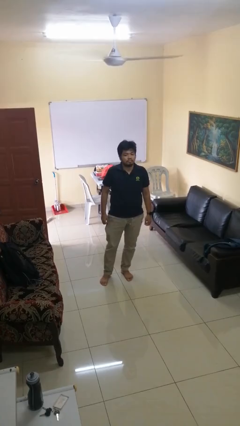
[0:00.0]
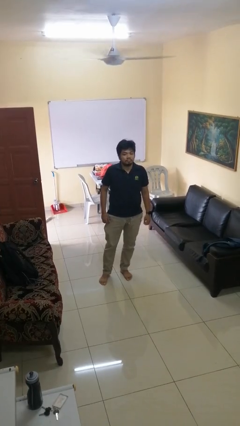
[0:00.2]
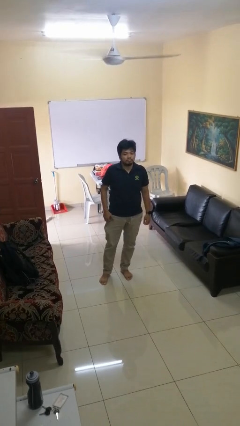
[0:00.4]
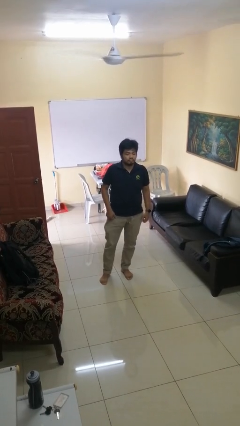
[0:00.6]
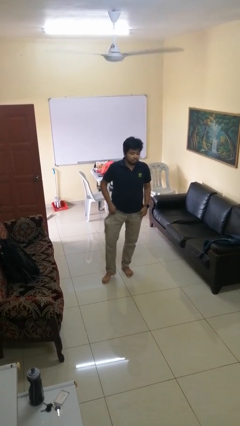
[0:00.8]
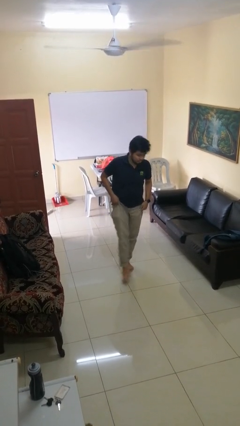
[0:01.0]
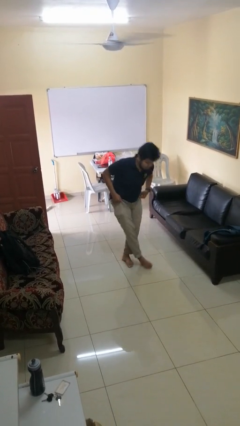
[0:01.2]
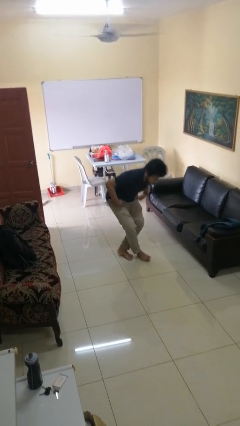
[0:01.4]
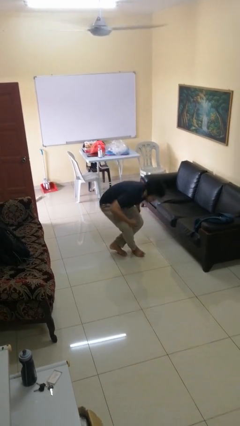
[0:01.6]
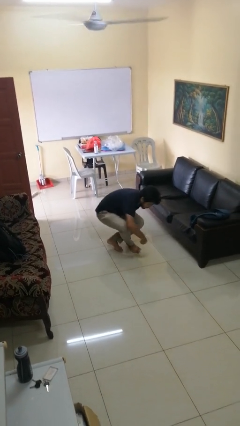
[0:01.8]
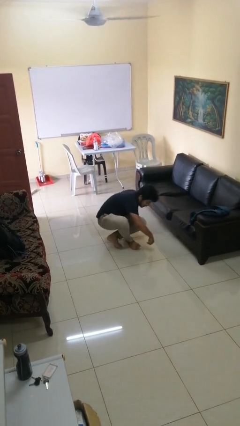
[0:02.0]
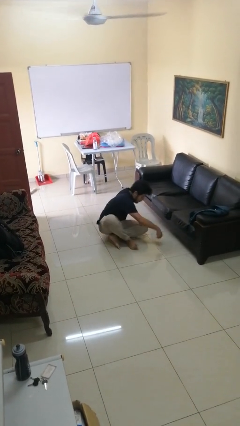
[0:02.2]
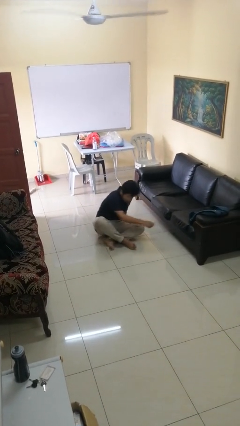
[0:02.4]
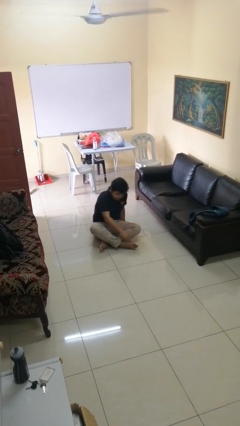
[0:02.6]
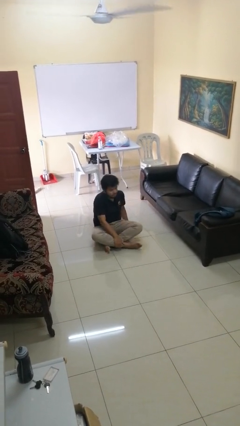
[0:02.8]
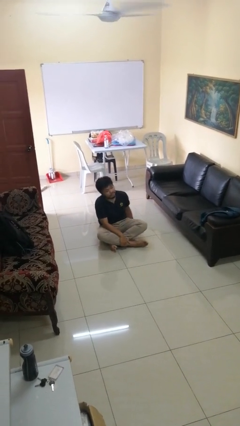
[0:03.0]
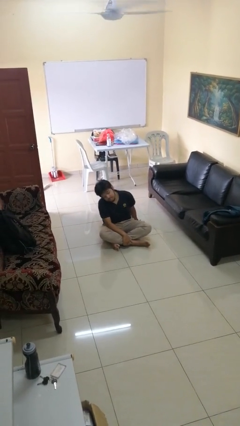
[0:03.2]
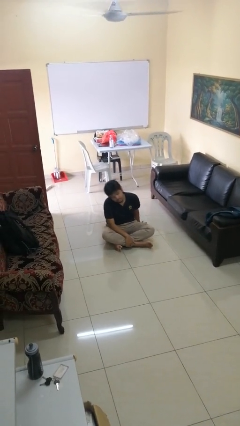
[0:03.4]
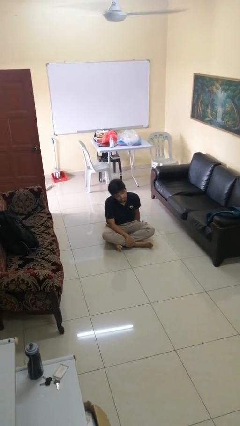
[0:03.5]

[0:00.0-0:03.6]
person sits crisscross

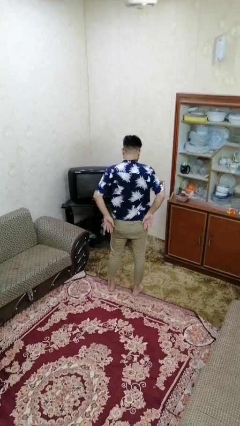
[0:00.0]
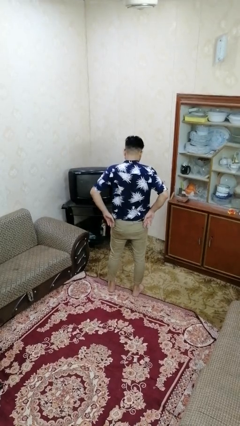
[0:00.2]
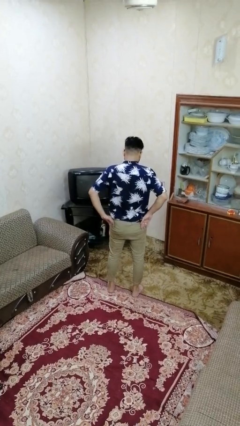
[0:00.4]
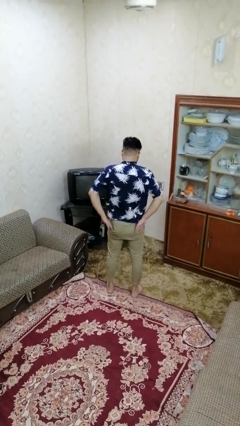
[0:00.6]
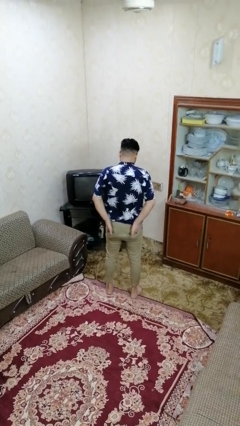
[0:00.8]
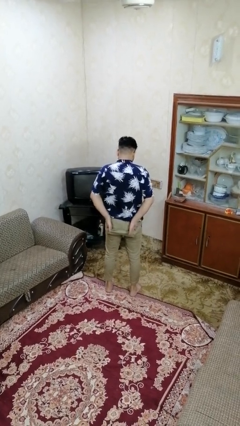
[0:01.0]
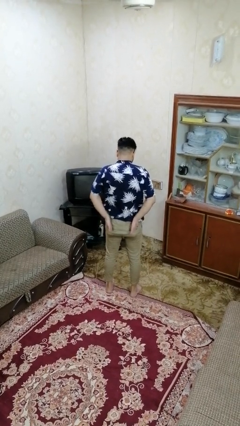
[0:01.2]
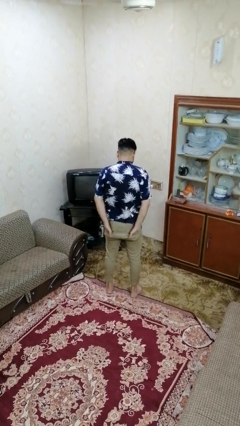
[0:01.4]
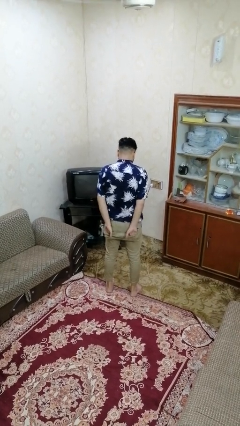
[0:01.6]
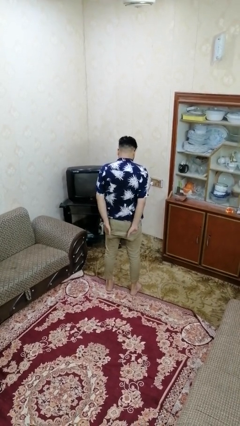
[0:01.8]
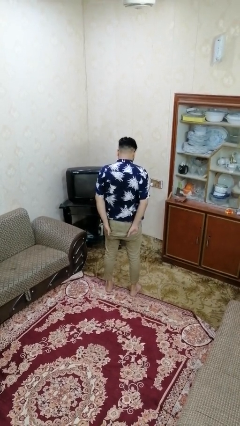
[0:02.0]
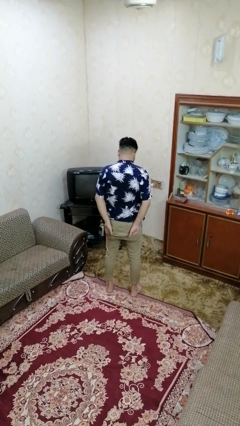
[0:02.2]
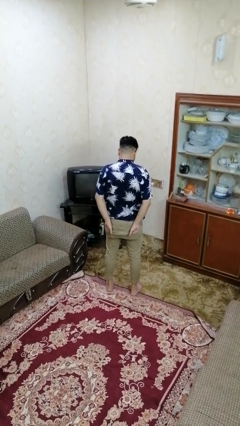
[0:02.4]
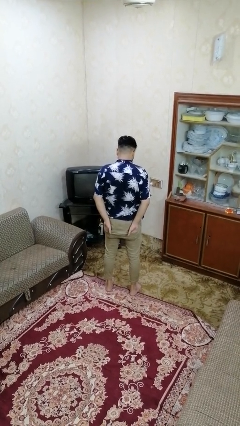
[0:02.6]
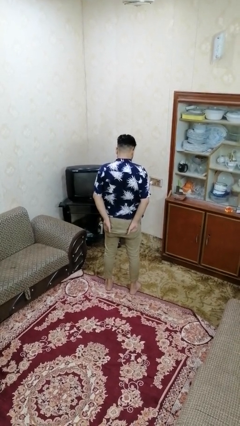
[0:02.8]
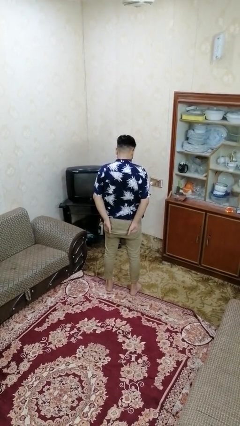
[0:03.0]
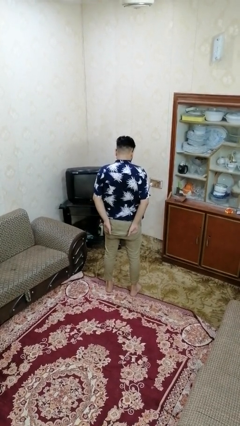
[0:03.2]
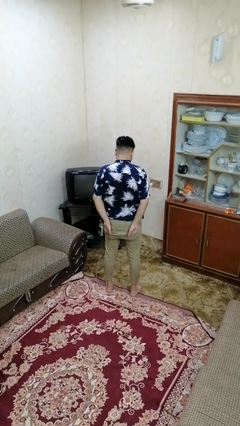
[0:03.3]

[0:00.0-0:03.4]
person puts hands in back pockets

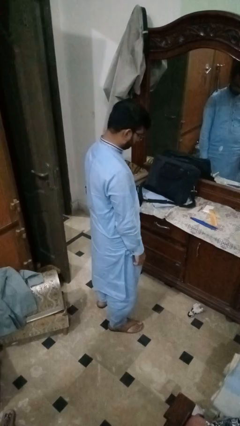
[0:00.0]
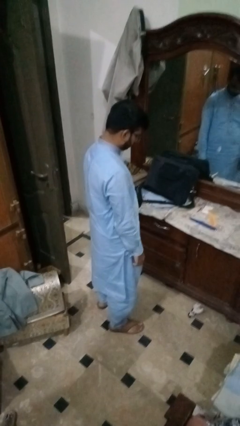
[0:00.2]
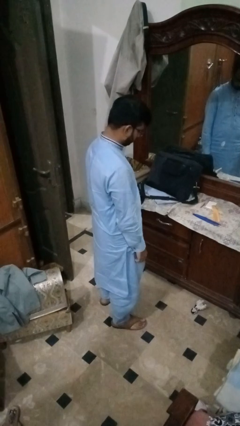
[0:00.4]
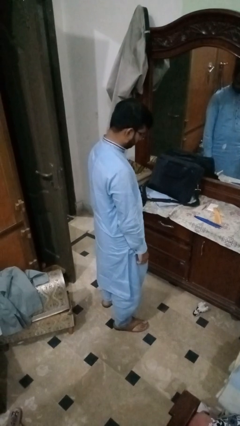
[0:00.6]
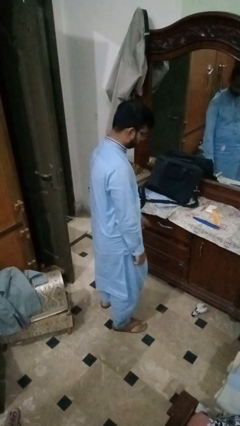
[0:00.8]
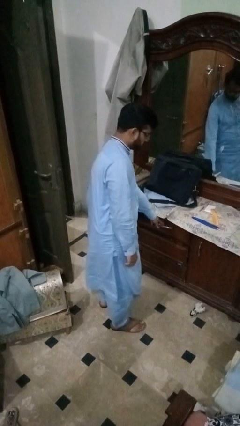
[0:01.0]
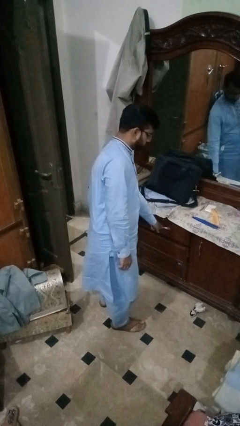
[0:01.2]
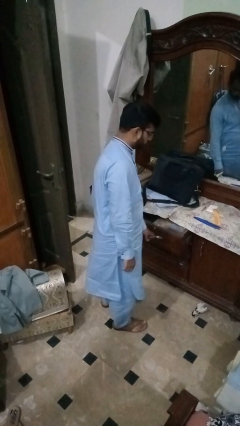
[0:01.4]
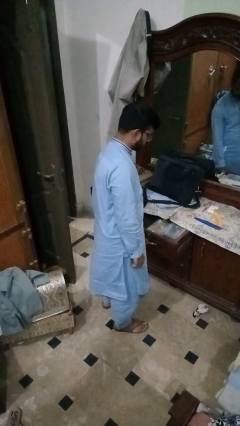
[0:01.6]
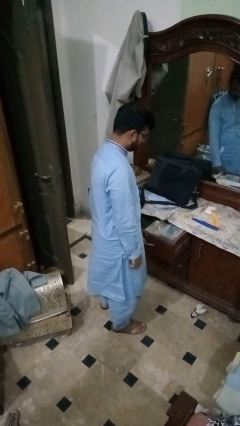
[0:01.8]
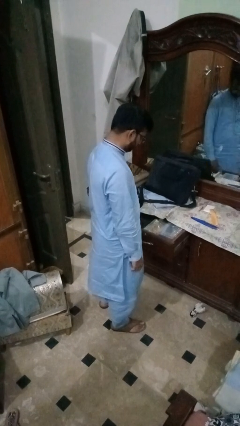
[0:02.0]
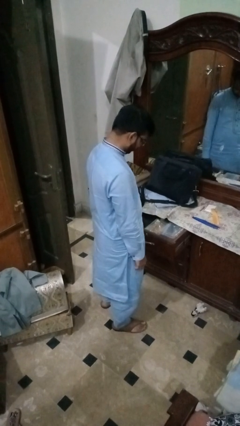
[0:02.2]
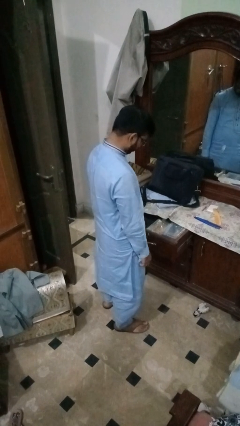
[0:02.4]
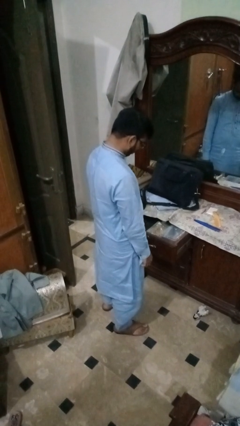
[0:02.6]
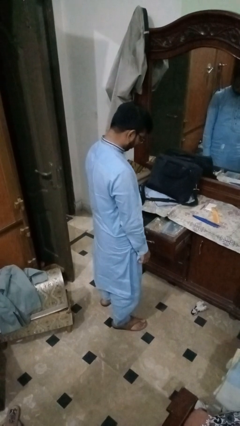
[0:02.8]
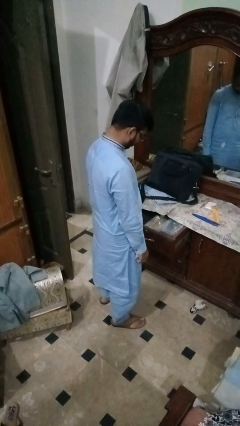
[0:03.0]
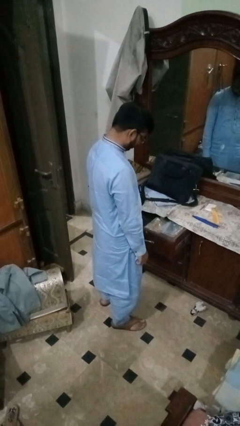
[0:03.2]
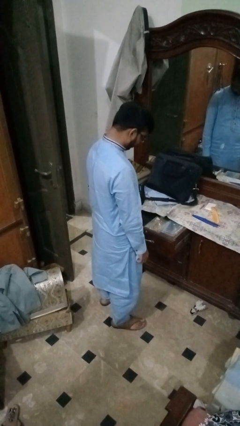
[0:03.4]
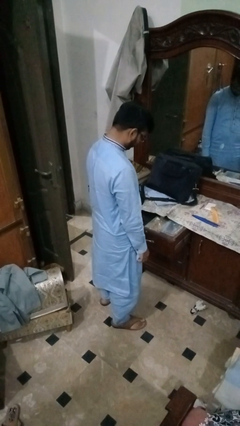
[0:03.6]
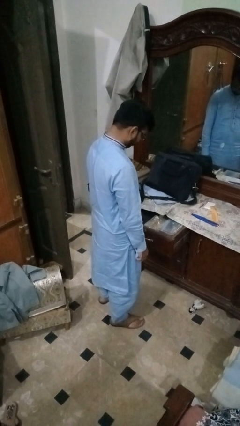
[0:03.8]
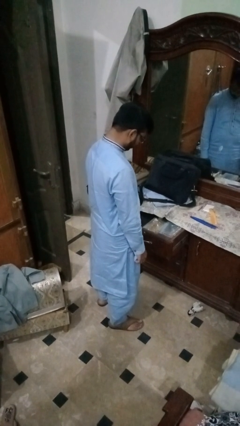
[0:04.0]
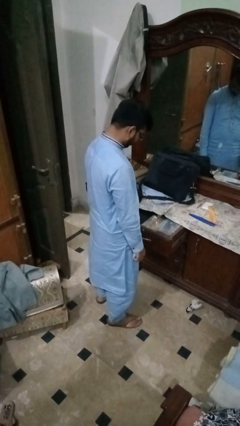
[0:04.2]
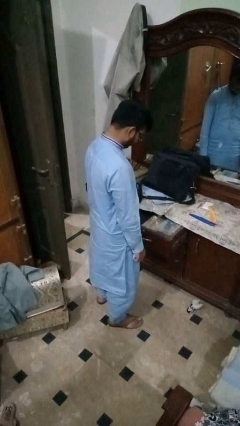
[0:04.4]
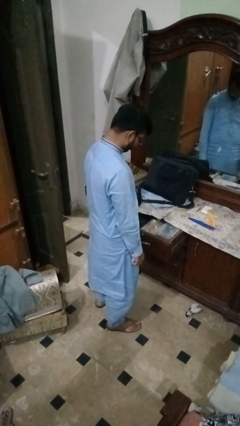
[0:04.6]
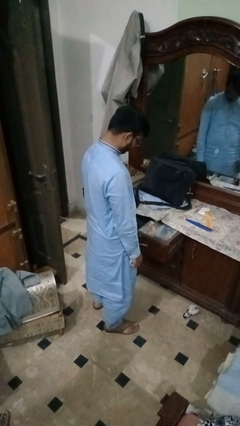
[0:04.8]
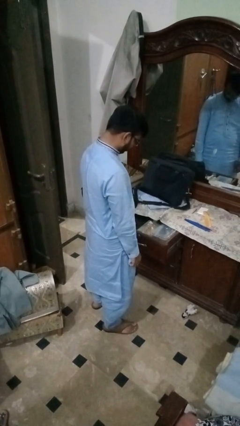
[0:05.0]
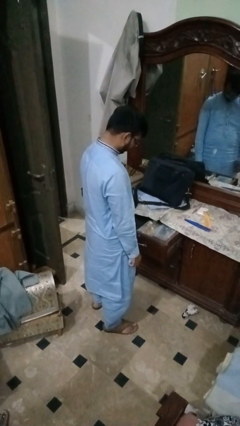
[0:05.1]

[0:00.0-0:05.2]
person opens dresser drawer

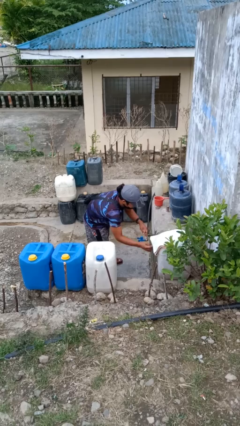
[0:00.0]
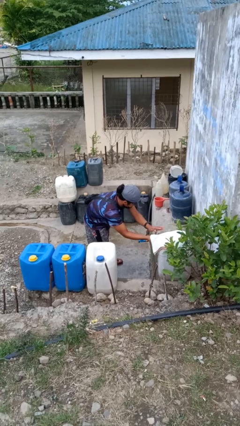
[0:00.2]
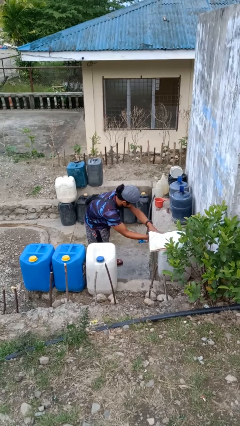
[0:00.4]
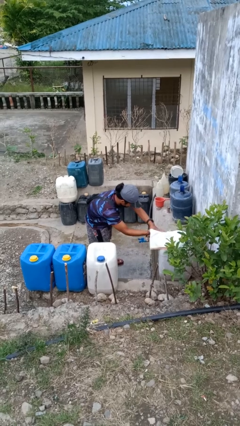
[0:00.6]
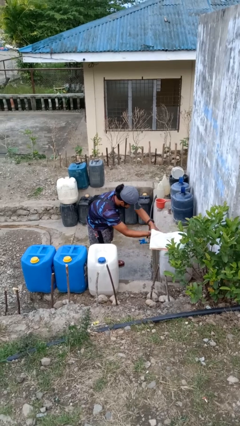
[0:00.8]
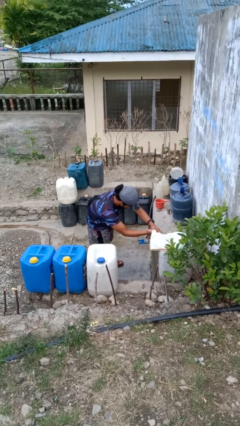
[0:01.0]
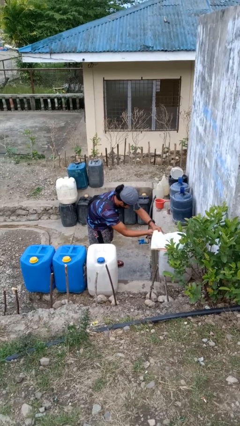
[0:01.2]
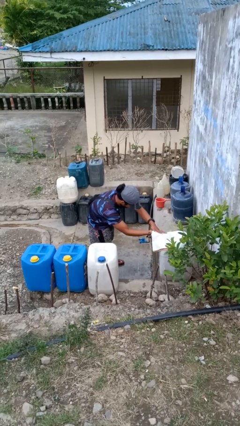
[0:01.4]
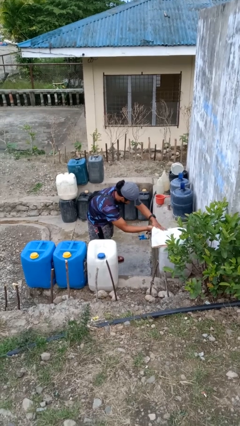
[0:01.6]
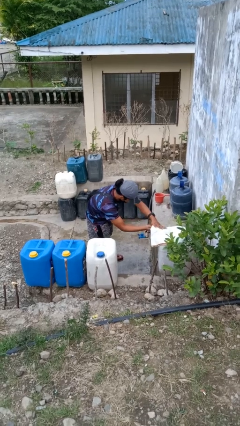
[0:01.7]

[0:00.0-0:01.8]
person dries hands with towel

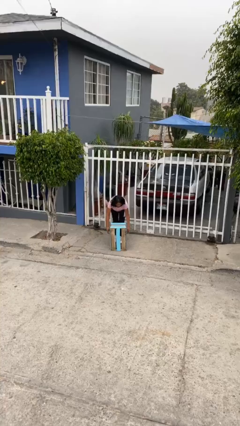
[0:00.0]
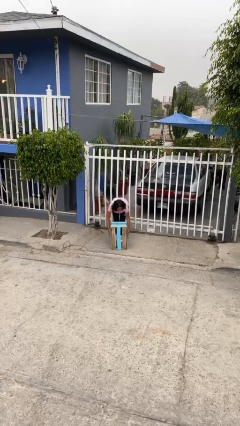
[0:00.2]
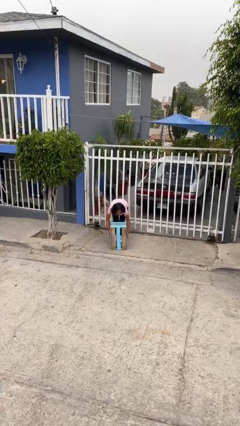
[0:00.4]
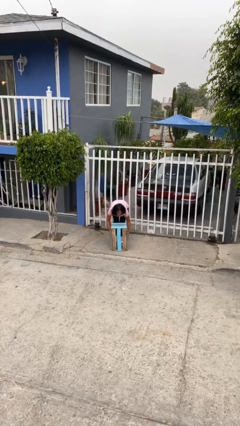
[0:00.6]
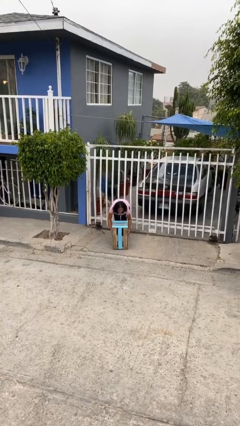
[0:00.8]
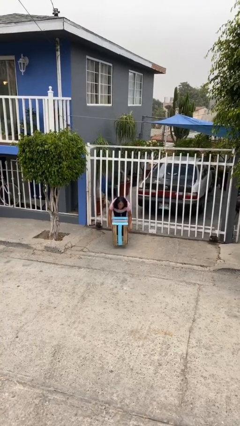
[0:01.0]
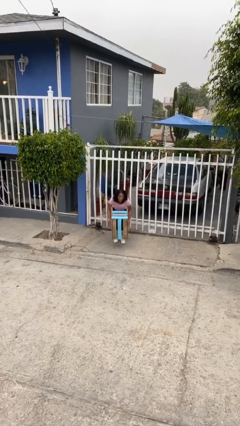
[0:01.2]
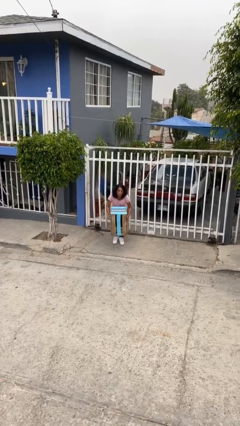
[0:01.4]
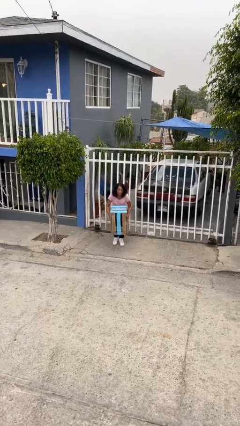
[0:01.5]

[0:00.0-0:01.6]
person picks up object from floor

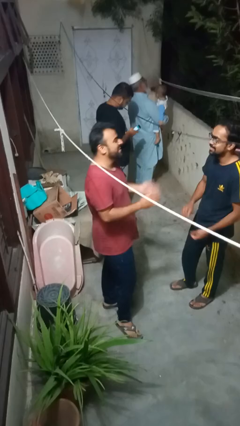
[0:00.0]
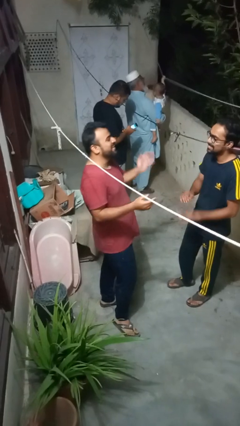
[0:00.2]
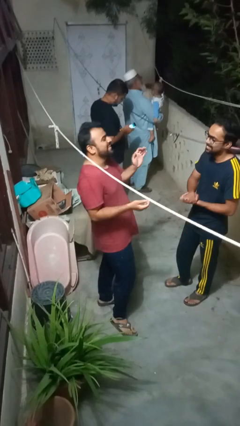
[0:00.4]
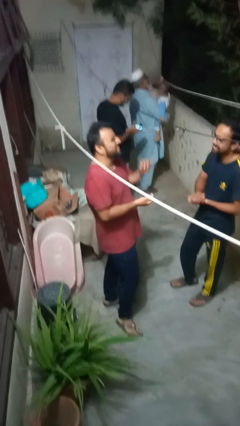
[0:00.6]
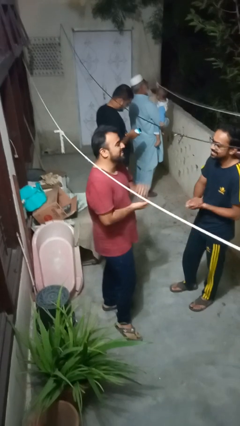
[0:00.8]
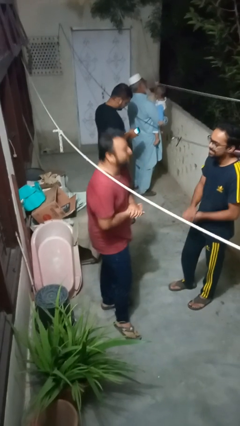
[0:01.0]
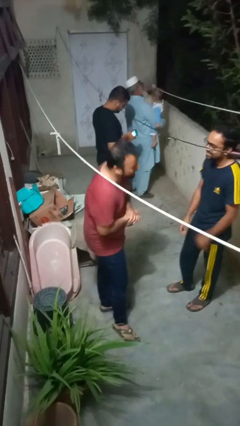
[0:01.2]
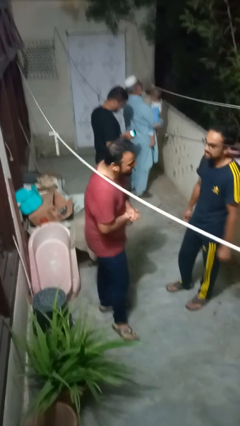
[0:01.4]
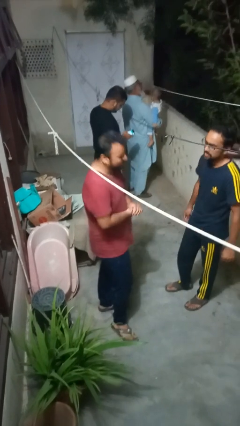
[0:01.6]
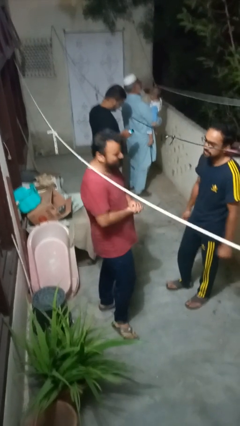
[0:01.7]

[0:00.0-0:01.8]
person laughs with person

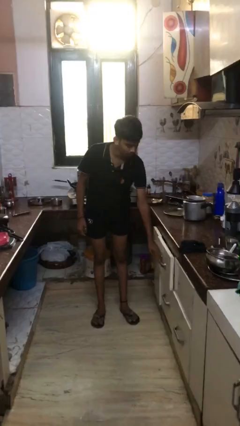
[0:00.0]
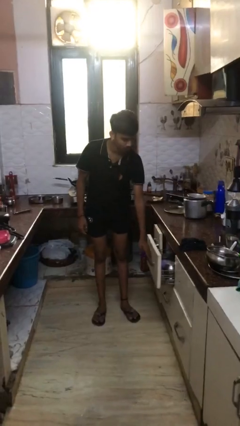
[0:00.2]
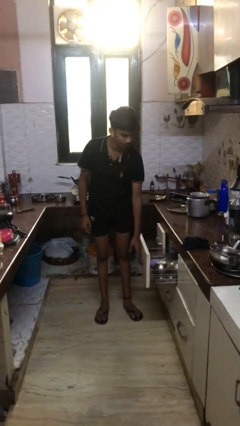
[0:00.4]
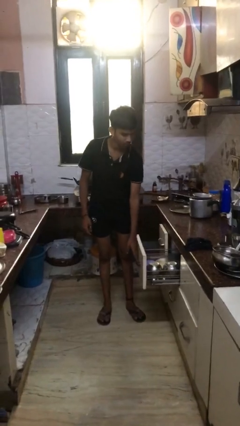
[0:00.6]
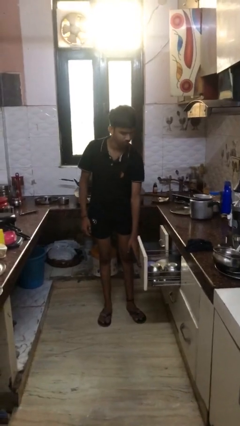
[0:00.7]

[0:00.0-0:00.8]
person opens kitchen drawer
